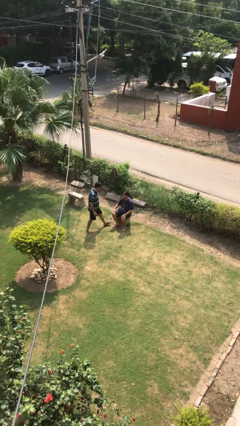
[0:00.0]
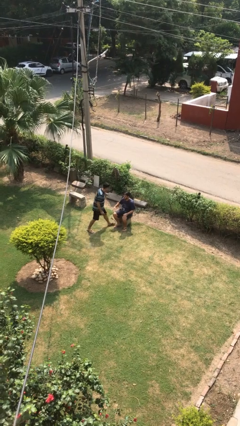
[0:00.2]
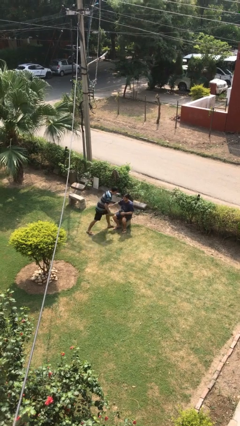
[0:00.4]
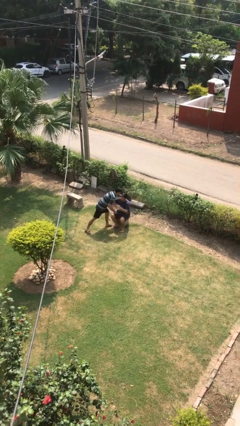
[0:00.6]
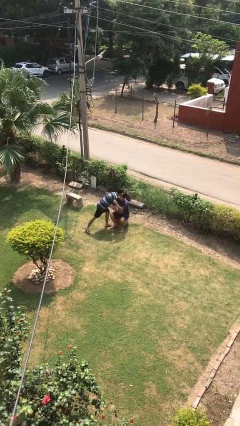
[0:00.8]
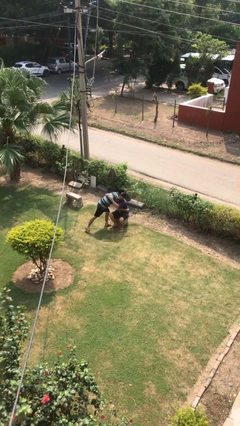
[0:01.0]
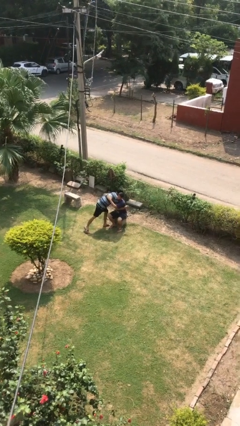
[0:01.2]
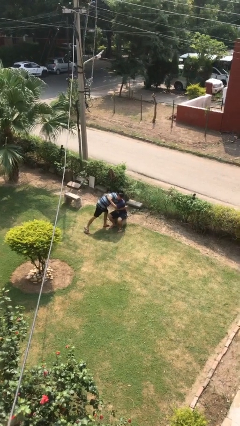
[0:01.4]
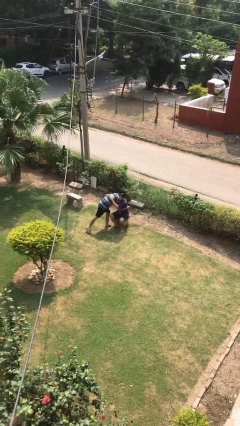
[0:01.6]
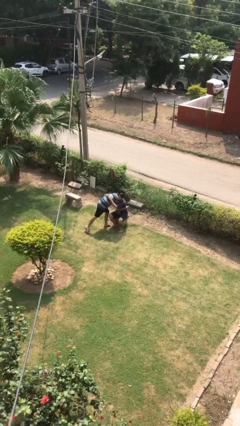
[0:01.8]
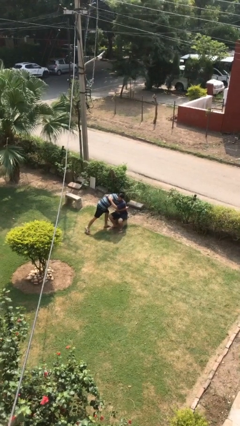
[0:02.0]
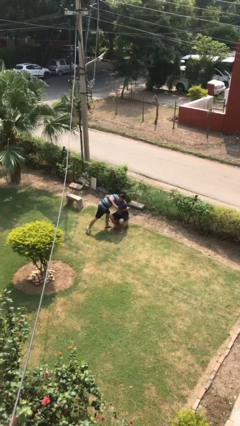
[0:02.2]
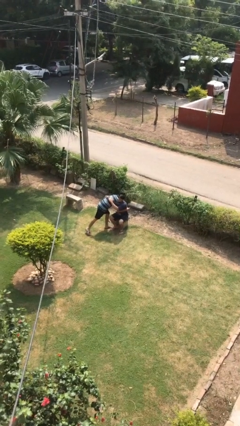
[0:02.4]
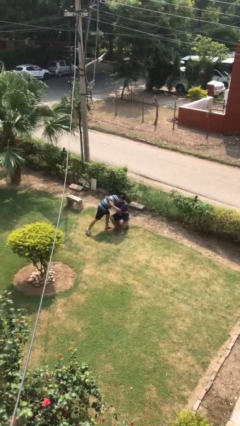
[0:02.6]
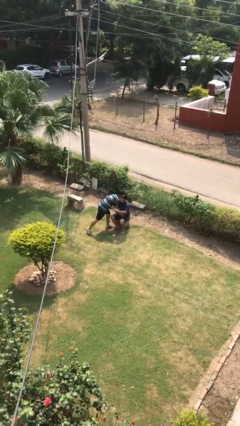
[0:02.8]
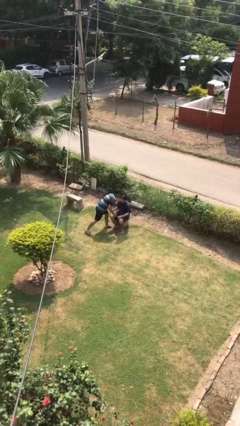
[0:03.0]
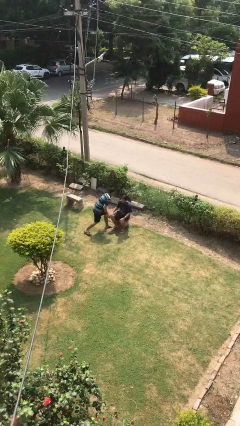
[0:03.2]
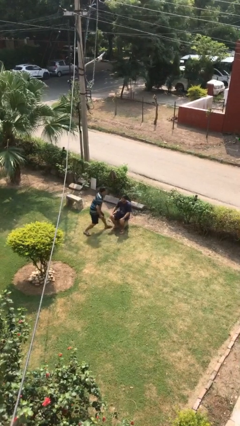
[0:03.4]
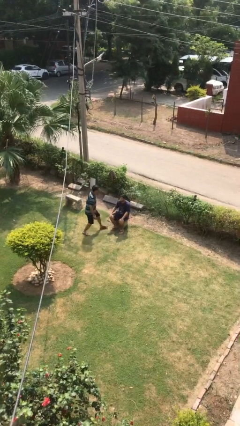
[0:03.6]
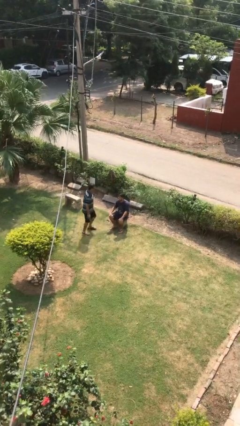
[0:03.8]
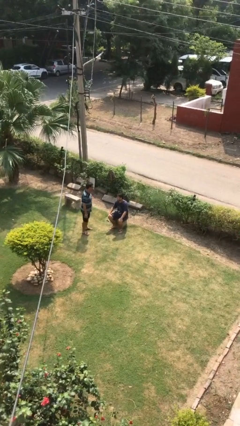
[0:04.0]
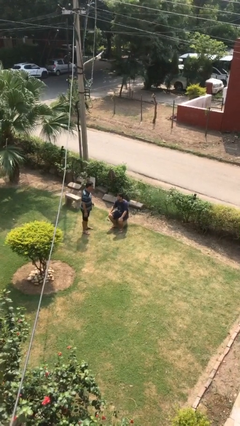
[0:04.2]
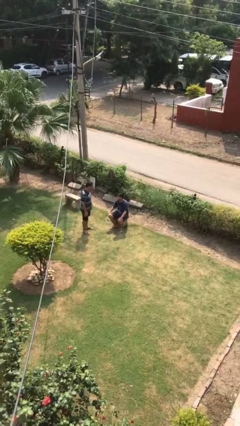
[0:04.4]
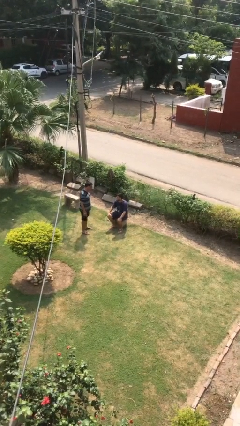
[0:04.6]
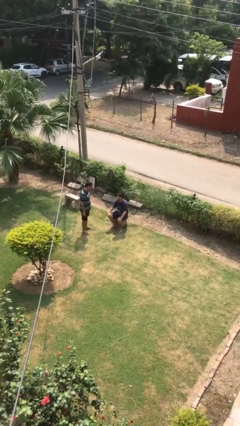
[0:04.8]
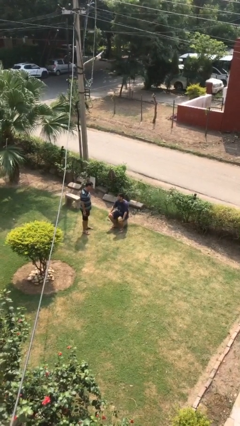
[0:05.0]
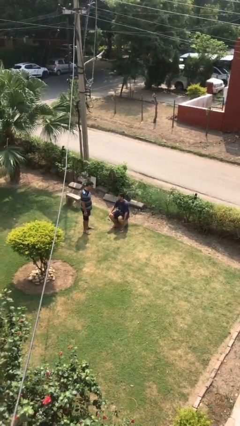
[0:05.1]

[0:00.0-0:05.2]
person embraces person

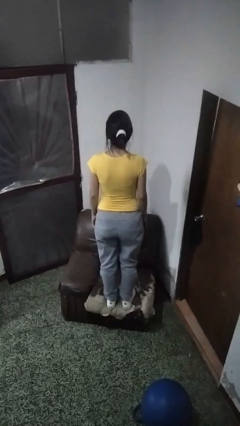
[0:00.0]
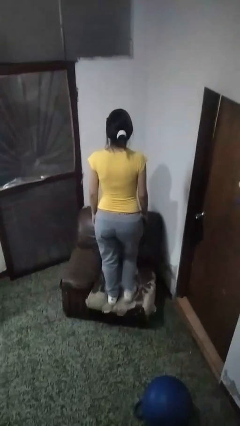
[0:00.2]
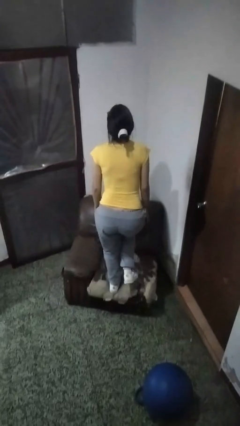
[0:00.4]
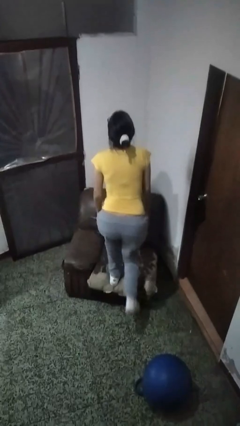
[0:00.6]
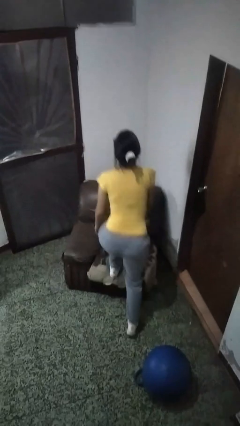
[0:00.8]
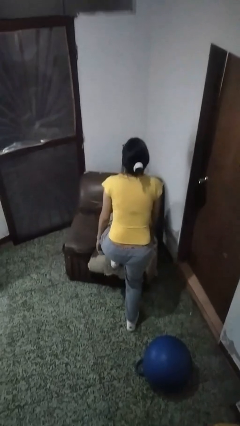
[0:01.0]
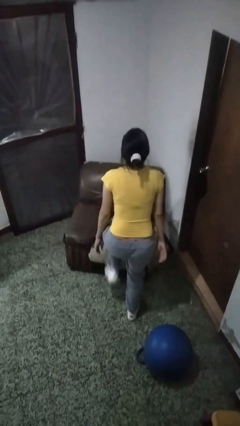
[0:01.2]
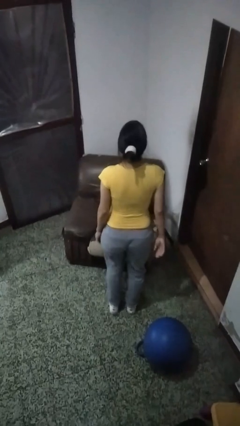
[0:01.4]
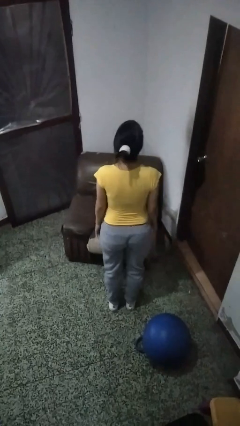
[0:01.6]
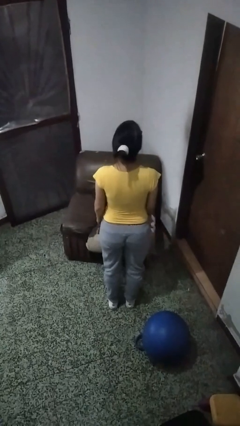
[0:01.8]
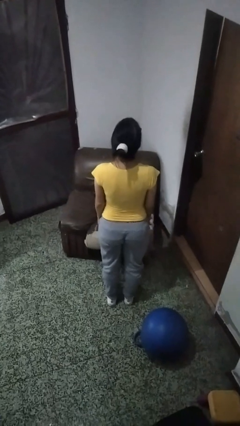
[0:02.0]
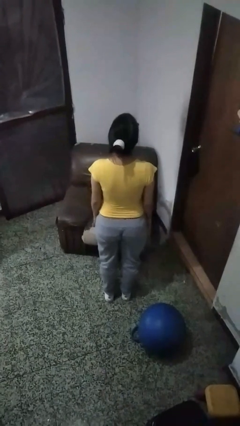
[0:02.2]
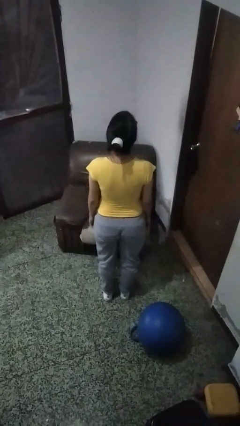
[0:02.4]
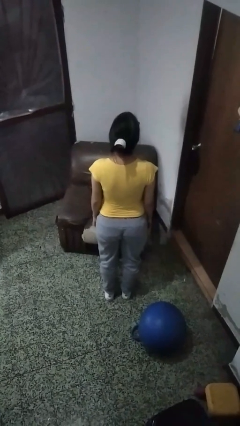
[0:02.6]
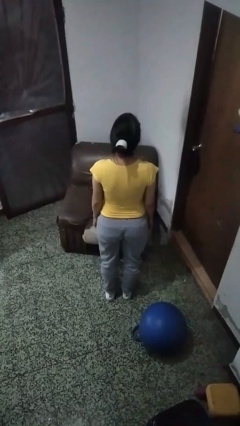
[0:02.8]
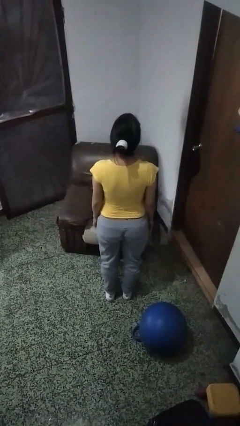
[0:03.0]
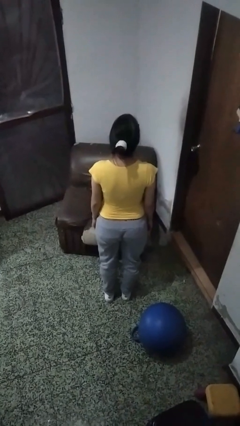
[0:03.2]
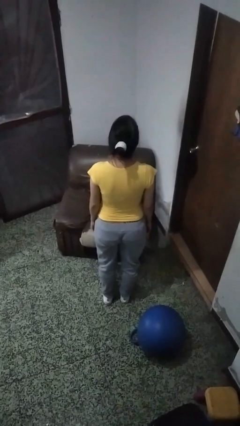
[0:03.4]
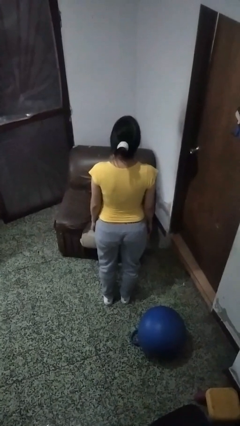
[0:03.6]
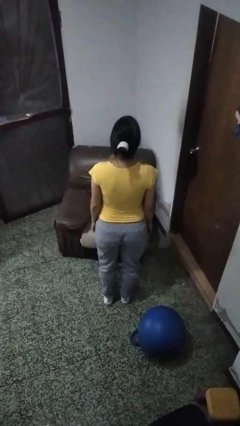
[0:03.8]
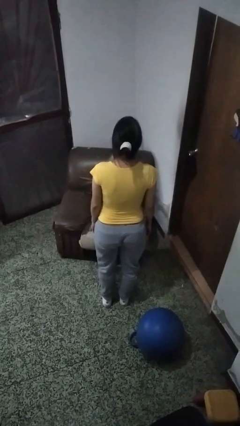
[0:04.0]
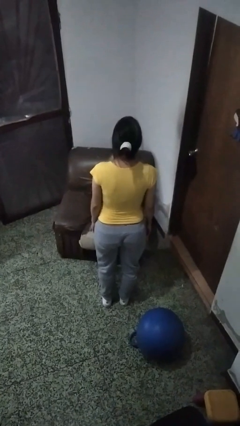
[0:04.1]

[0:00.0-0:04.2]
person climbs off couch

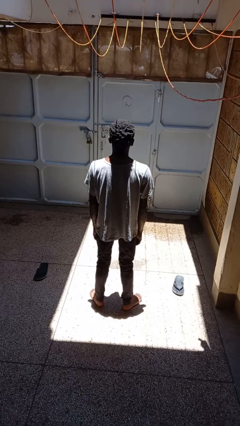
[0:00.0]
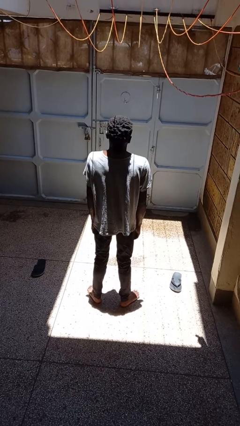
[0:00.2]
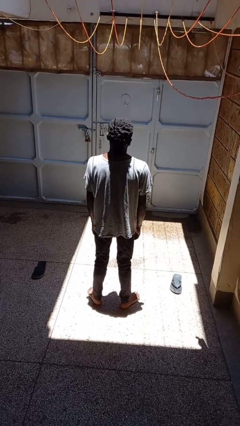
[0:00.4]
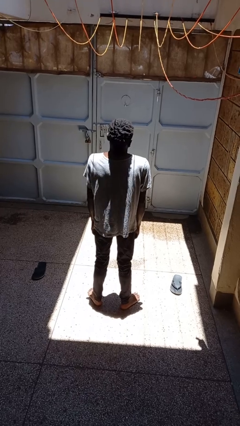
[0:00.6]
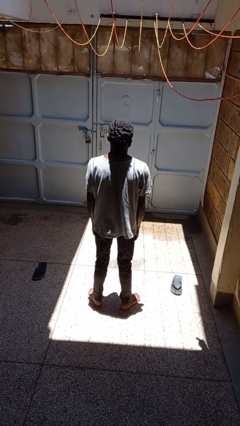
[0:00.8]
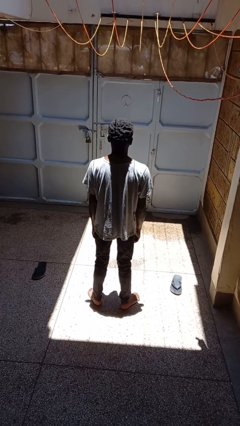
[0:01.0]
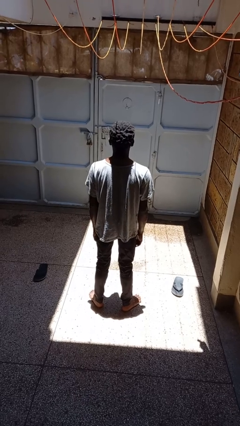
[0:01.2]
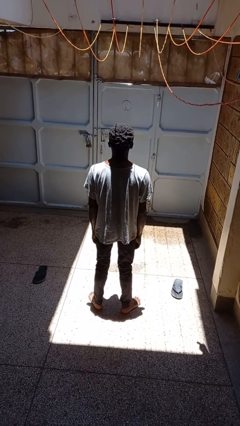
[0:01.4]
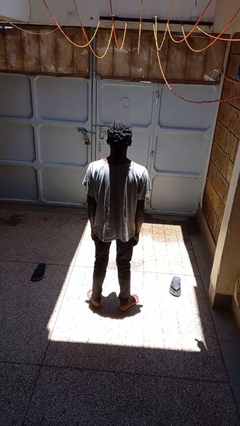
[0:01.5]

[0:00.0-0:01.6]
person shrugs

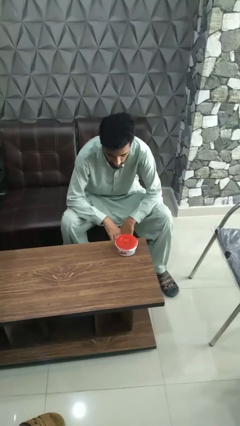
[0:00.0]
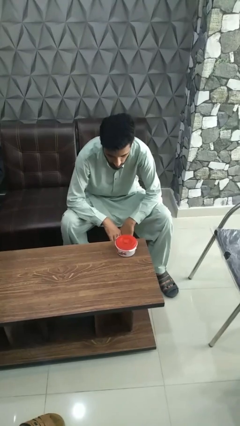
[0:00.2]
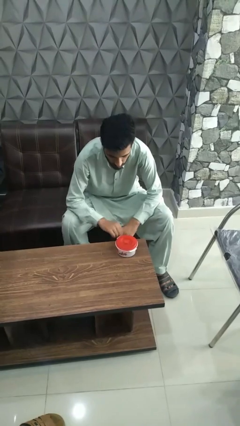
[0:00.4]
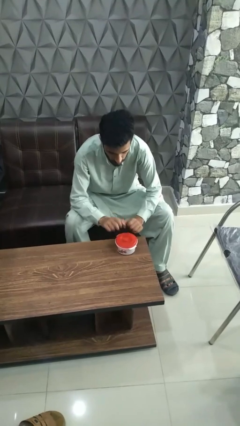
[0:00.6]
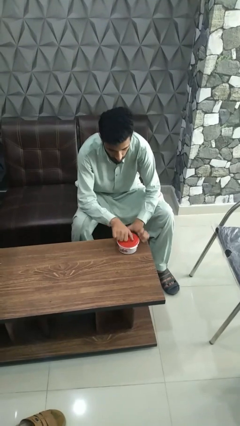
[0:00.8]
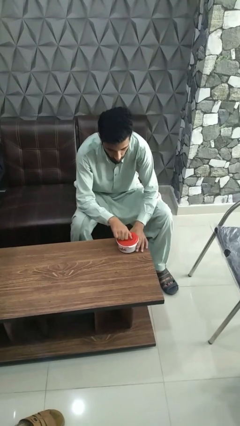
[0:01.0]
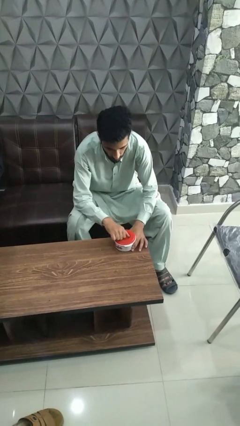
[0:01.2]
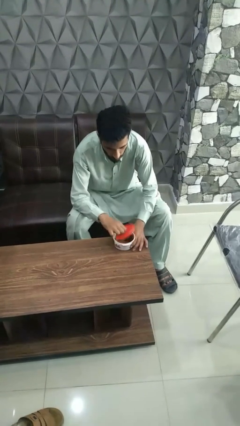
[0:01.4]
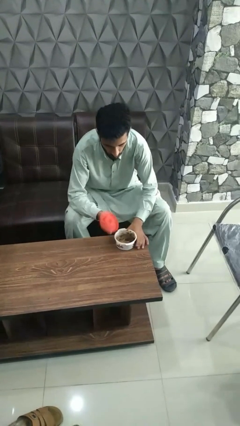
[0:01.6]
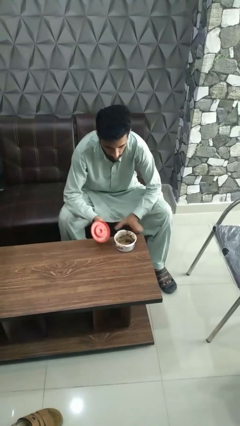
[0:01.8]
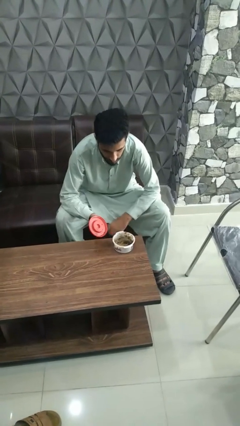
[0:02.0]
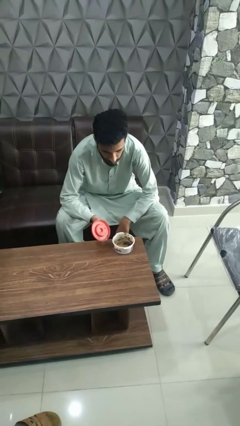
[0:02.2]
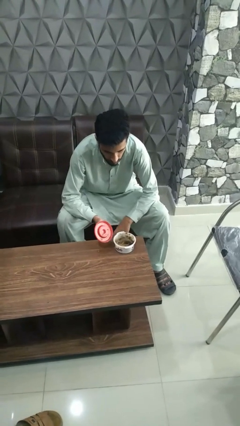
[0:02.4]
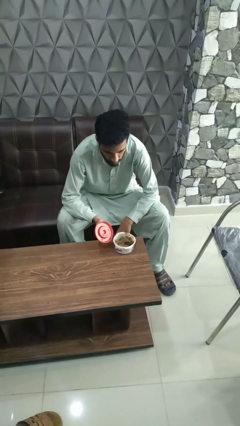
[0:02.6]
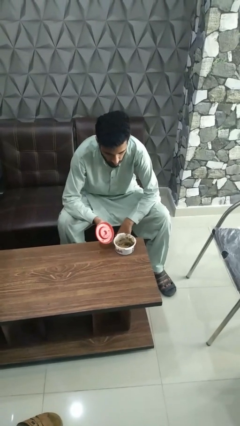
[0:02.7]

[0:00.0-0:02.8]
person opens jar

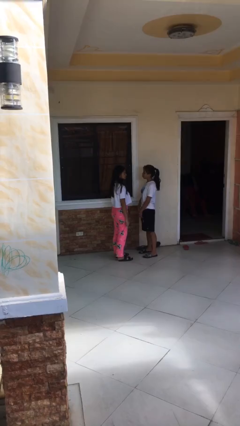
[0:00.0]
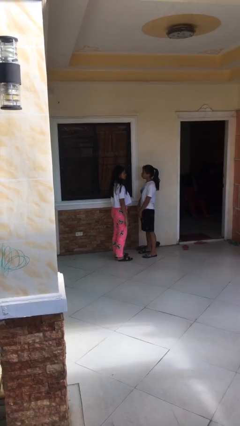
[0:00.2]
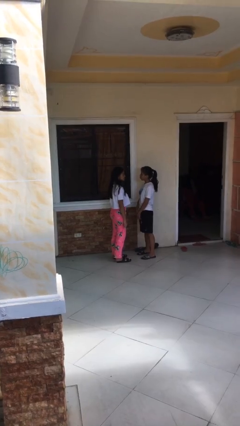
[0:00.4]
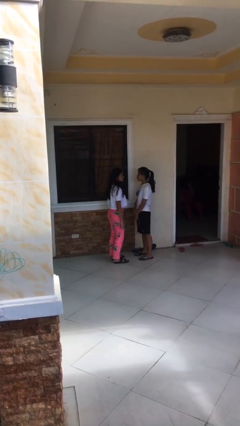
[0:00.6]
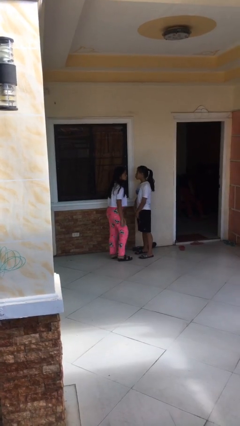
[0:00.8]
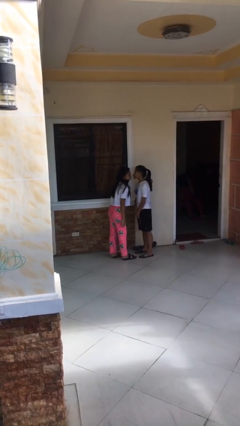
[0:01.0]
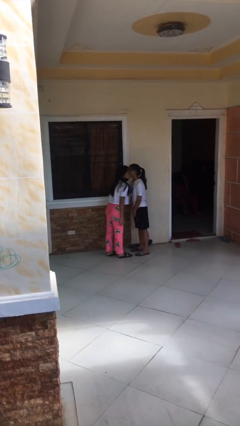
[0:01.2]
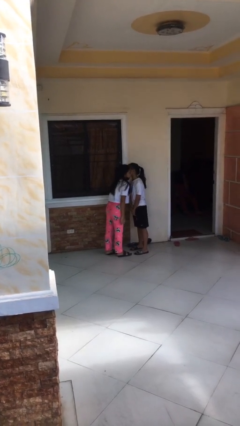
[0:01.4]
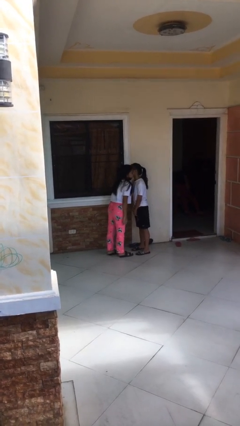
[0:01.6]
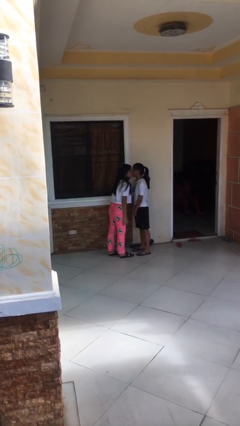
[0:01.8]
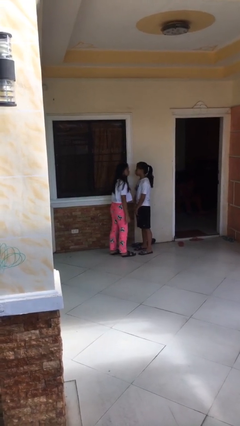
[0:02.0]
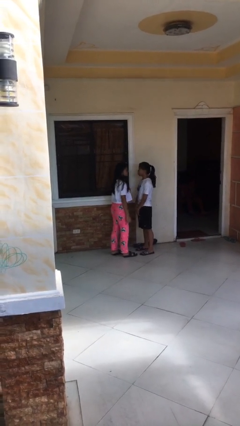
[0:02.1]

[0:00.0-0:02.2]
person kisses cheek of person

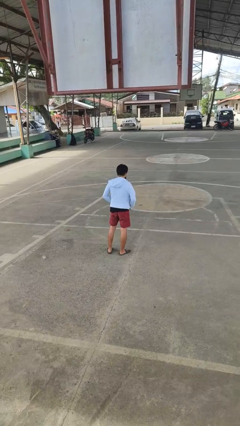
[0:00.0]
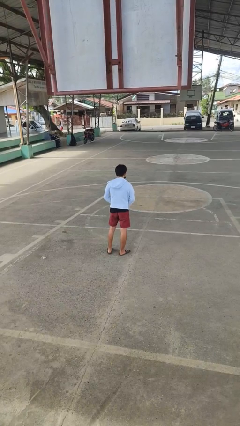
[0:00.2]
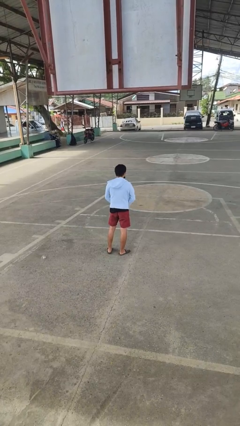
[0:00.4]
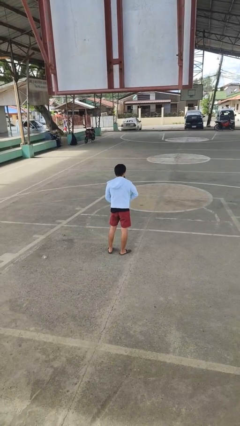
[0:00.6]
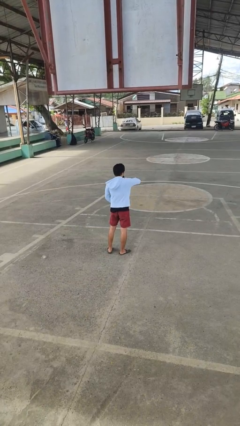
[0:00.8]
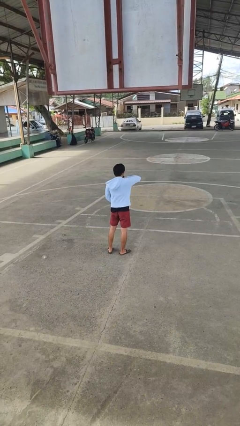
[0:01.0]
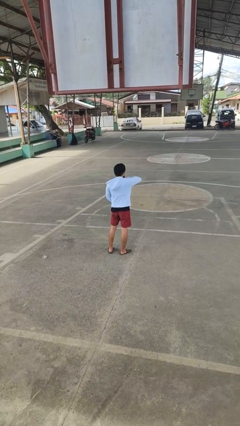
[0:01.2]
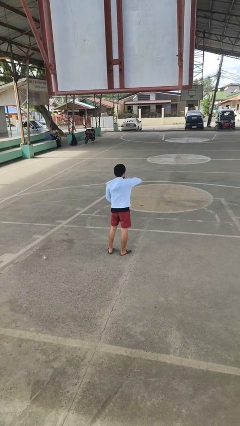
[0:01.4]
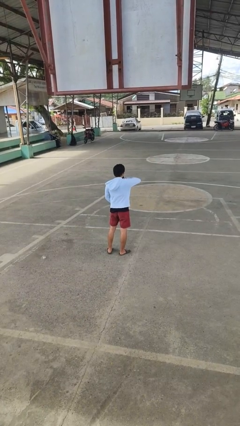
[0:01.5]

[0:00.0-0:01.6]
person zips up jacket
